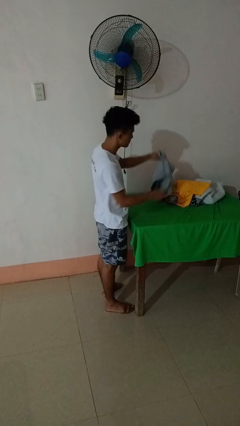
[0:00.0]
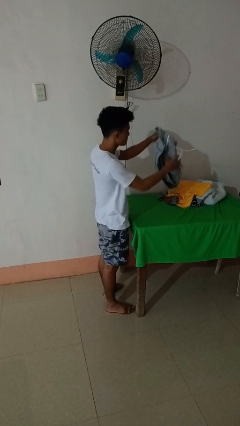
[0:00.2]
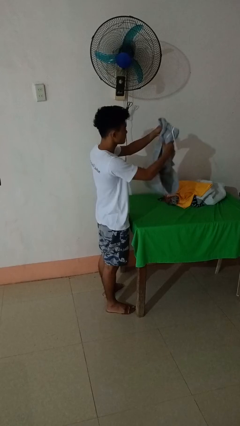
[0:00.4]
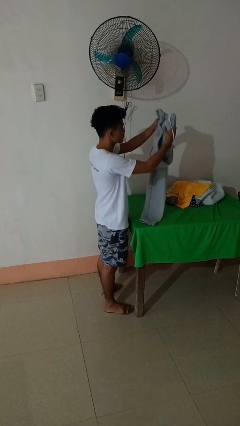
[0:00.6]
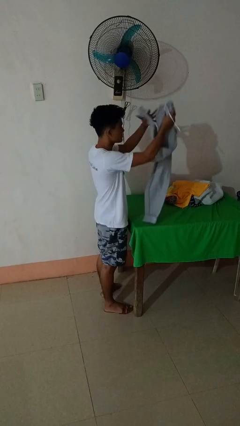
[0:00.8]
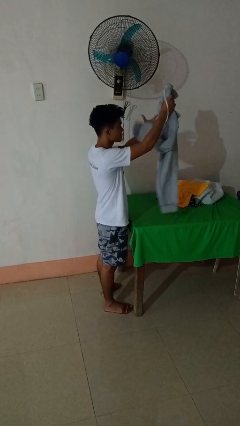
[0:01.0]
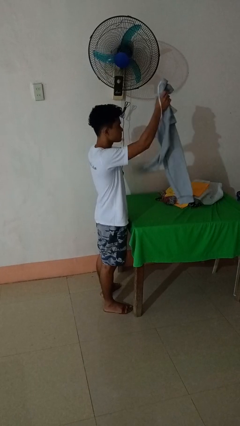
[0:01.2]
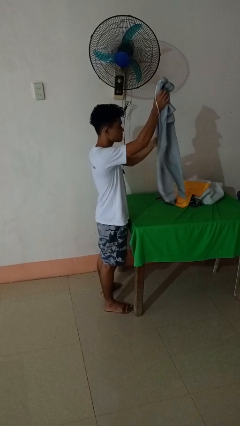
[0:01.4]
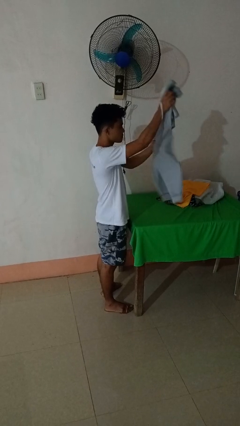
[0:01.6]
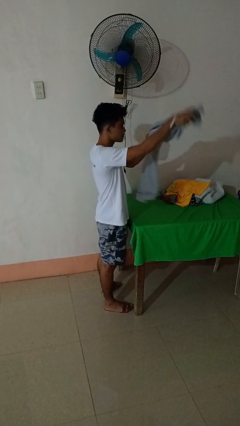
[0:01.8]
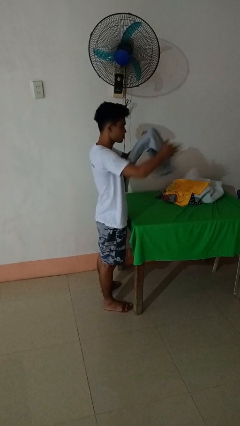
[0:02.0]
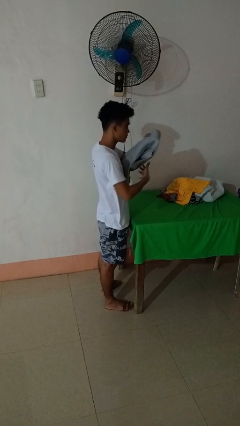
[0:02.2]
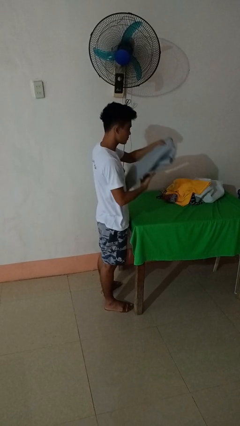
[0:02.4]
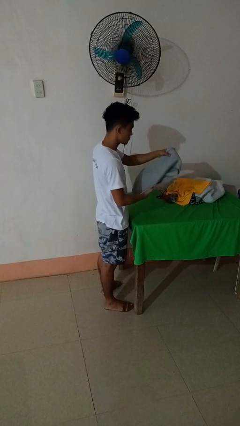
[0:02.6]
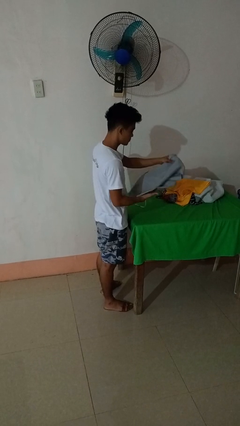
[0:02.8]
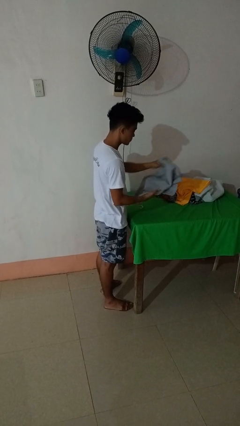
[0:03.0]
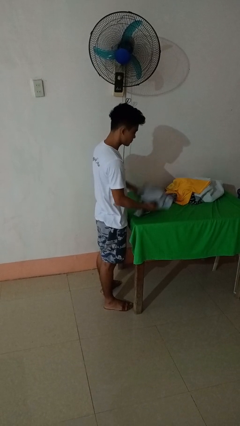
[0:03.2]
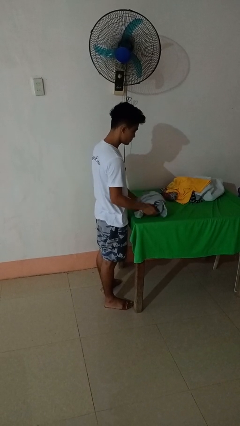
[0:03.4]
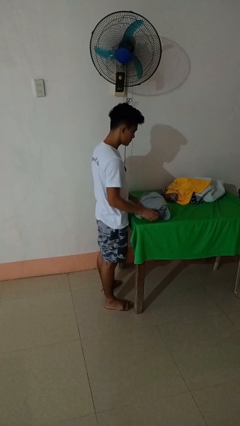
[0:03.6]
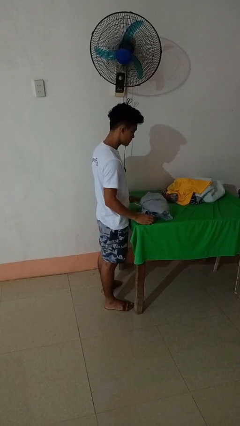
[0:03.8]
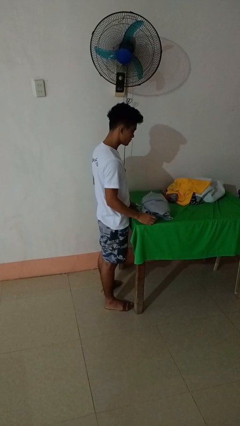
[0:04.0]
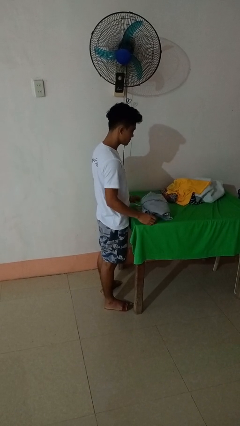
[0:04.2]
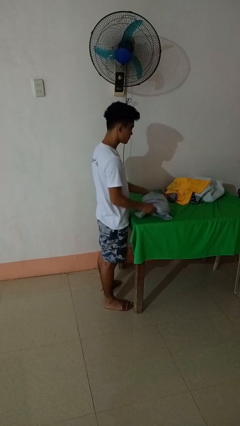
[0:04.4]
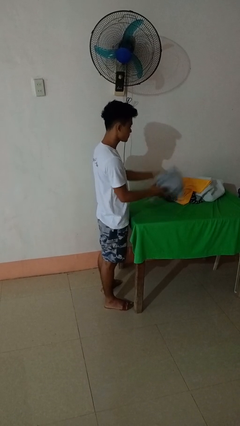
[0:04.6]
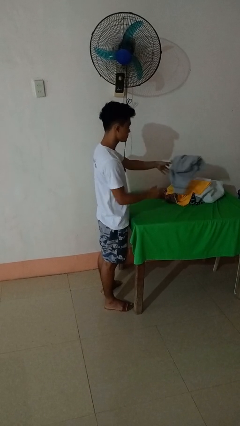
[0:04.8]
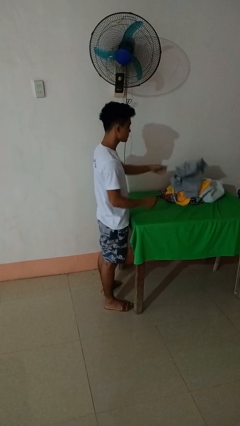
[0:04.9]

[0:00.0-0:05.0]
person folds pants

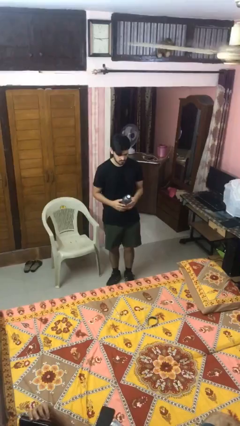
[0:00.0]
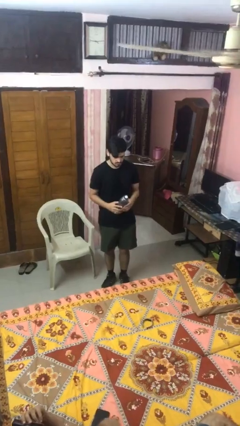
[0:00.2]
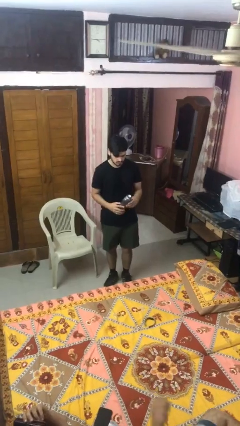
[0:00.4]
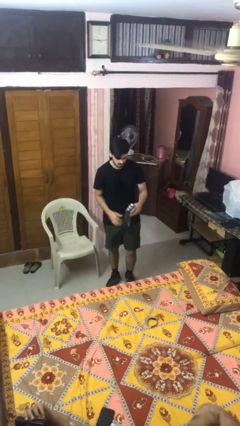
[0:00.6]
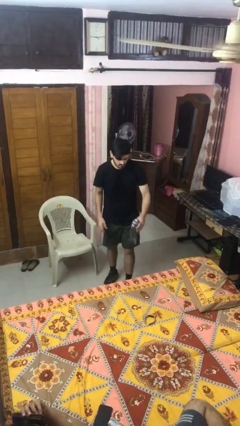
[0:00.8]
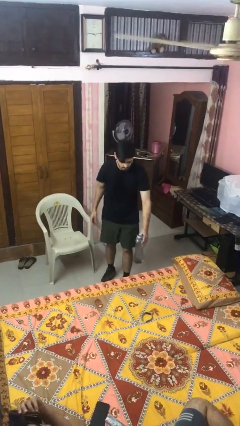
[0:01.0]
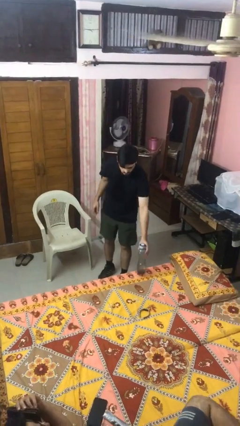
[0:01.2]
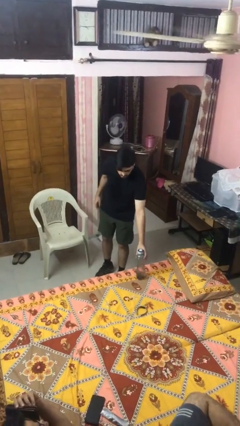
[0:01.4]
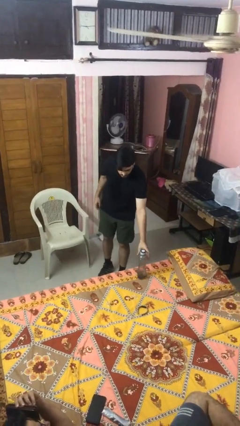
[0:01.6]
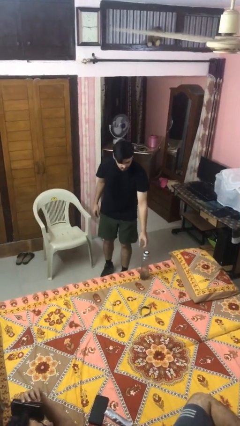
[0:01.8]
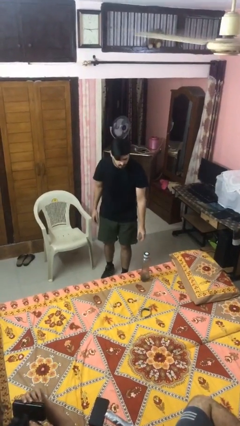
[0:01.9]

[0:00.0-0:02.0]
person puts down object on bed

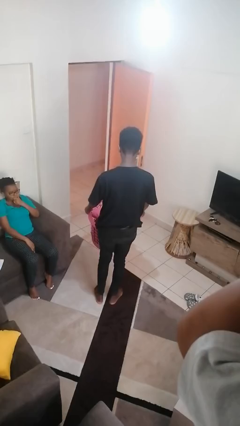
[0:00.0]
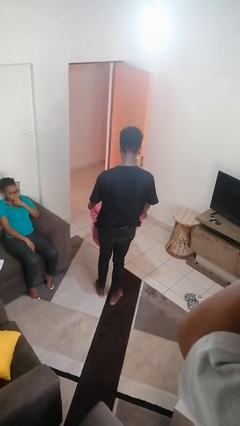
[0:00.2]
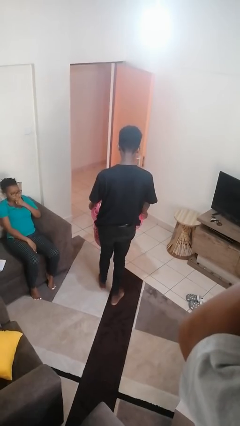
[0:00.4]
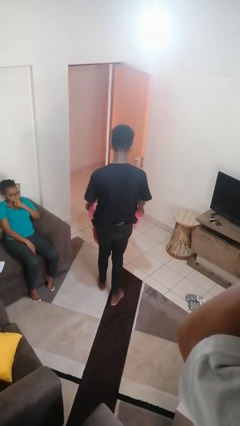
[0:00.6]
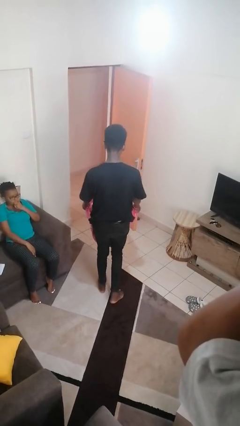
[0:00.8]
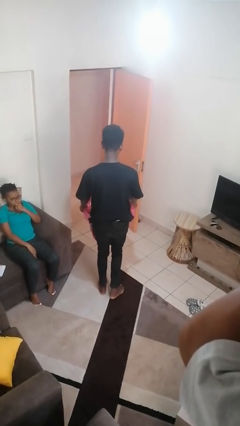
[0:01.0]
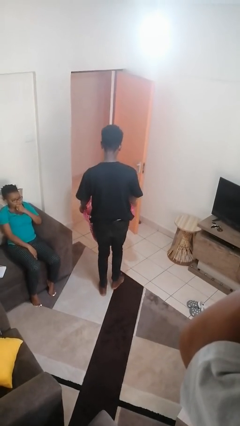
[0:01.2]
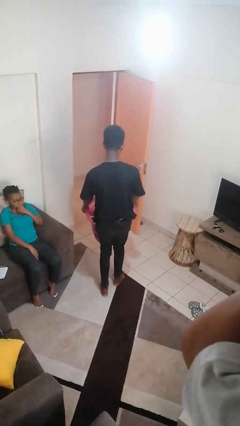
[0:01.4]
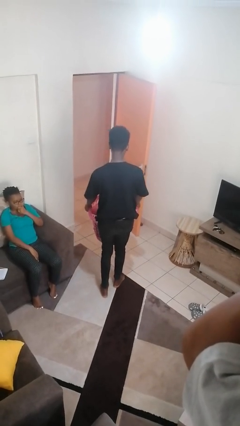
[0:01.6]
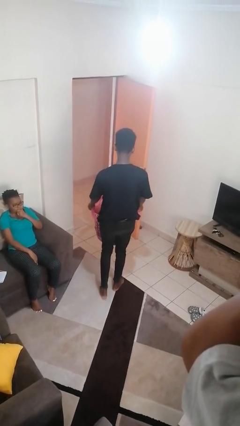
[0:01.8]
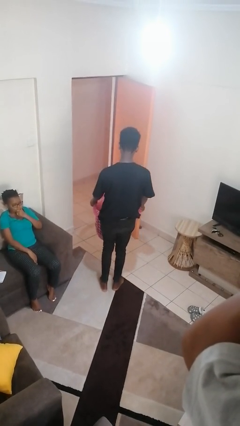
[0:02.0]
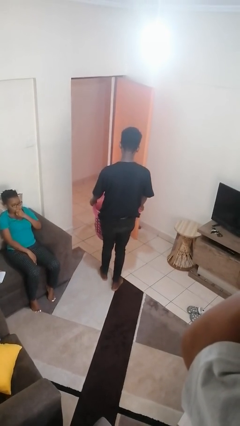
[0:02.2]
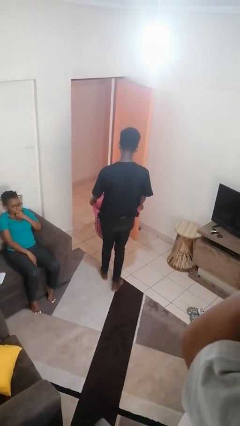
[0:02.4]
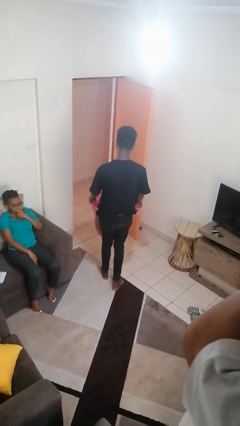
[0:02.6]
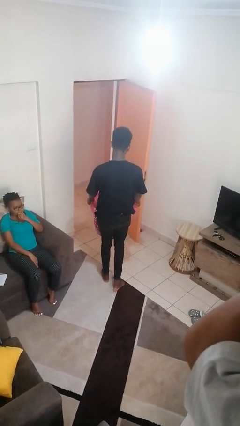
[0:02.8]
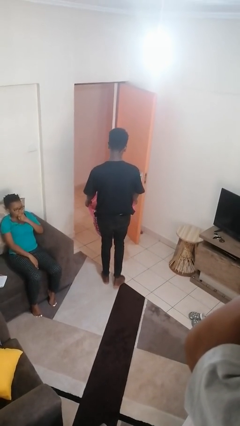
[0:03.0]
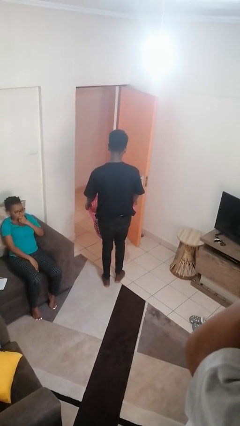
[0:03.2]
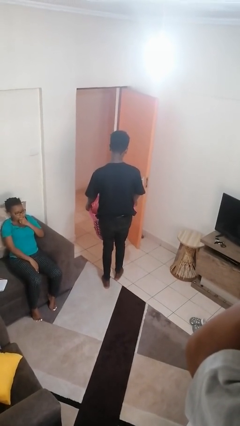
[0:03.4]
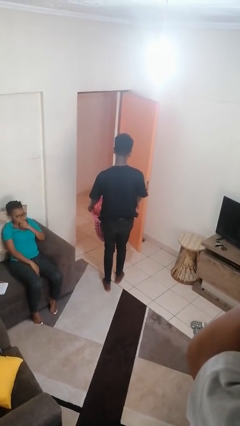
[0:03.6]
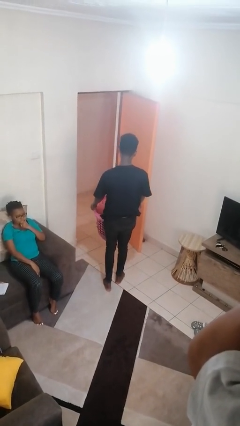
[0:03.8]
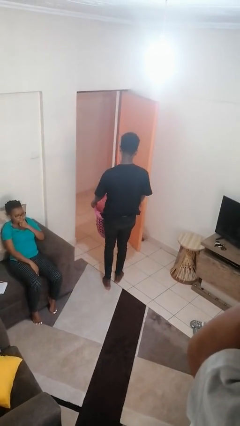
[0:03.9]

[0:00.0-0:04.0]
person carries laundry basket

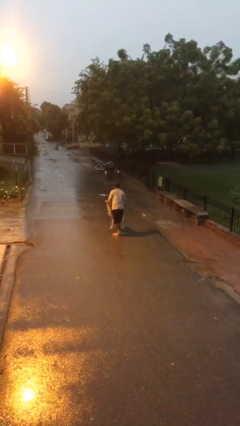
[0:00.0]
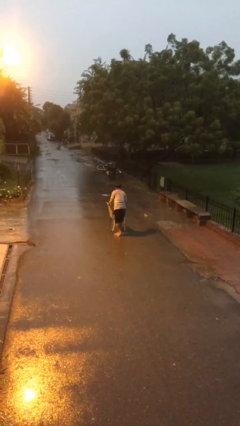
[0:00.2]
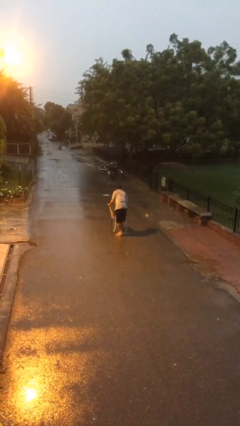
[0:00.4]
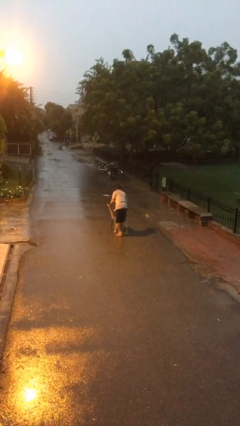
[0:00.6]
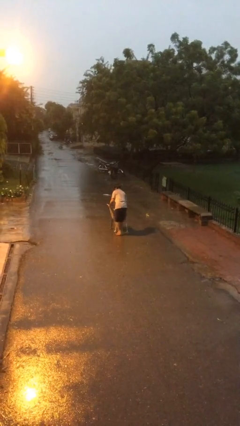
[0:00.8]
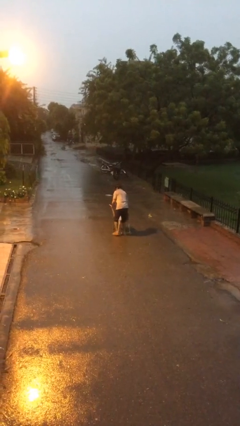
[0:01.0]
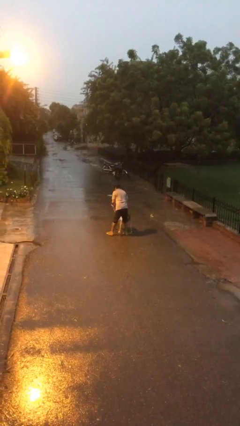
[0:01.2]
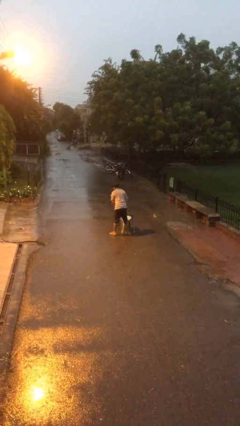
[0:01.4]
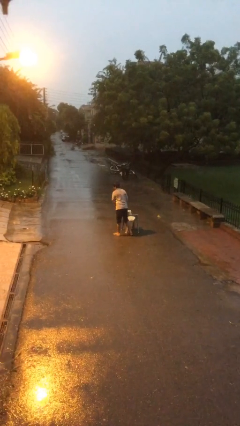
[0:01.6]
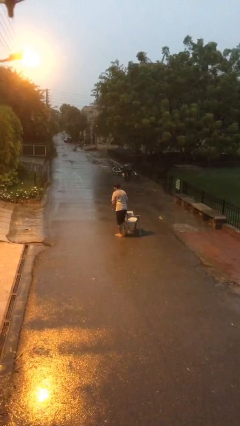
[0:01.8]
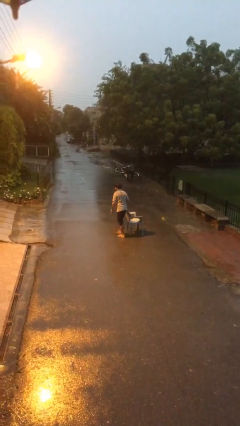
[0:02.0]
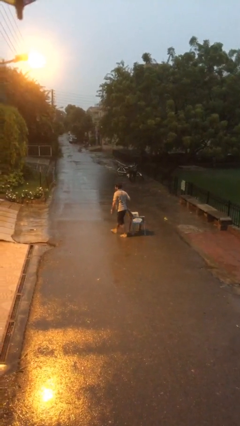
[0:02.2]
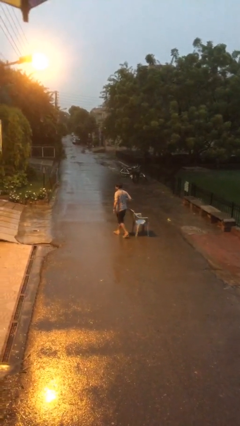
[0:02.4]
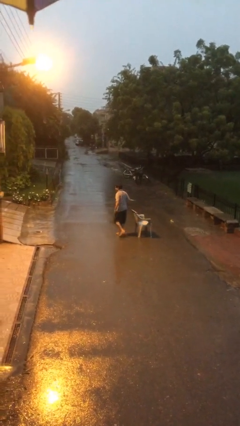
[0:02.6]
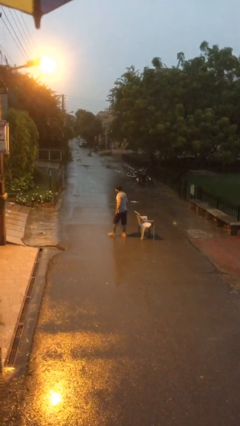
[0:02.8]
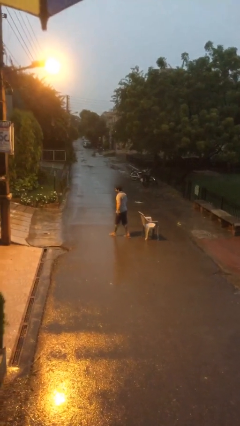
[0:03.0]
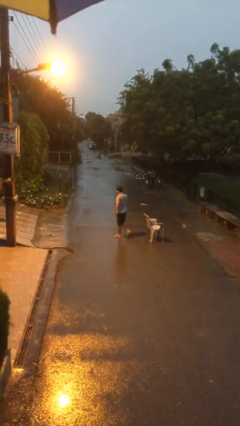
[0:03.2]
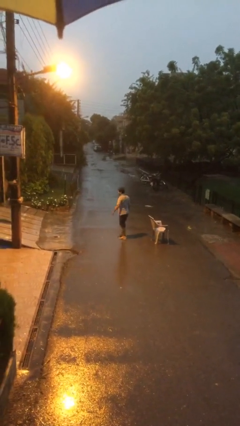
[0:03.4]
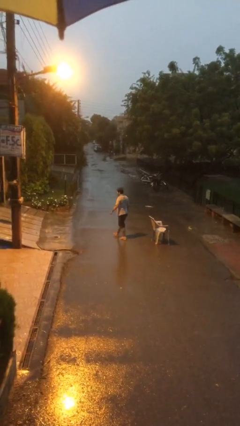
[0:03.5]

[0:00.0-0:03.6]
person puts down object on floor

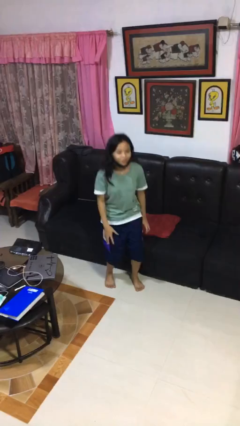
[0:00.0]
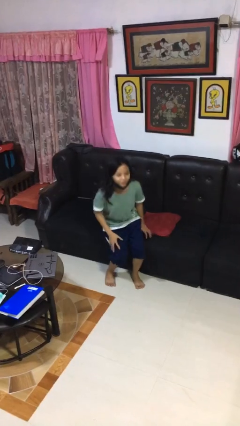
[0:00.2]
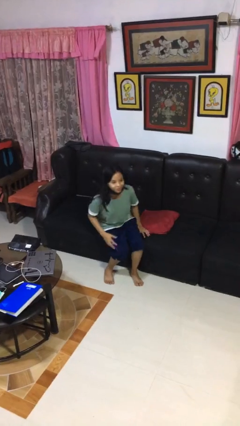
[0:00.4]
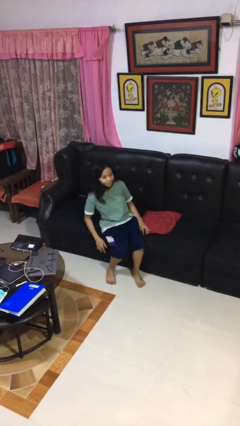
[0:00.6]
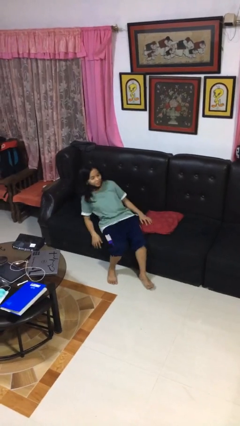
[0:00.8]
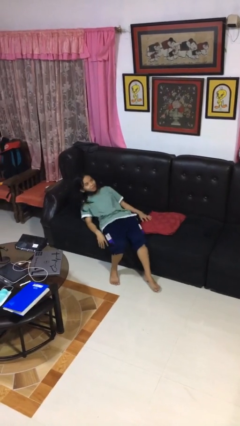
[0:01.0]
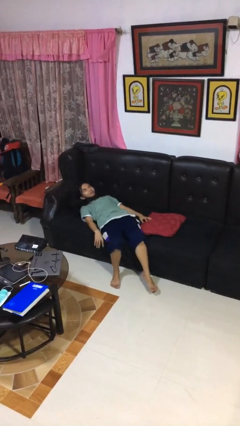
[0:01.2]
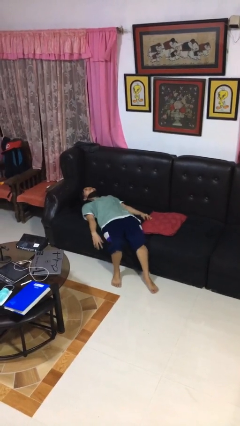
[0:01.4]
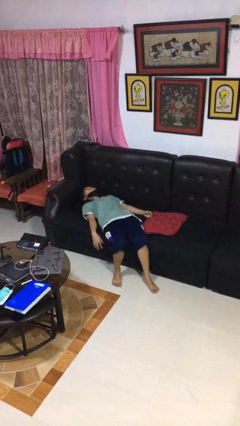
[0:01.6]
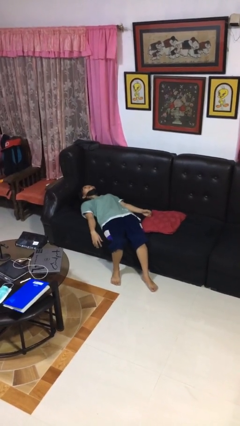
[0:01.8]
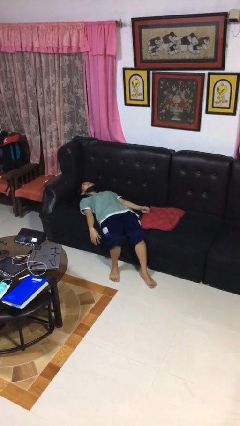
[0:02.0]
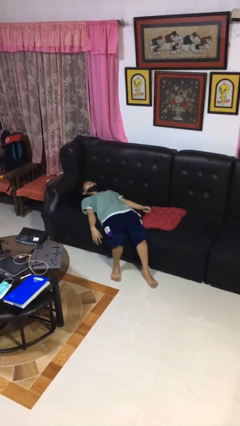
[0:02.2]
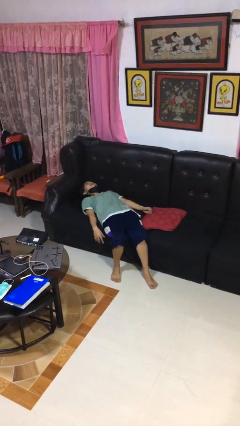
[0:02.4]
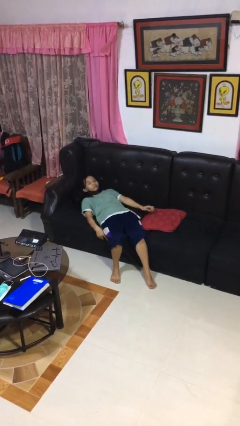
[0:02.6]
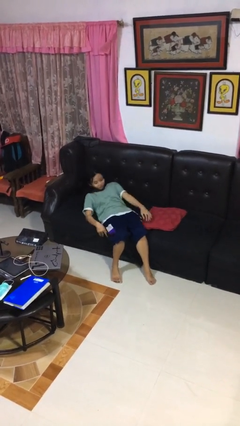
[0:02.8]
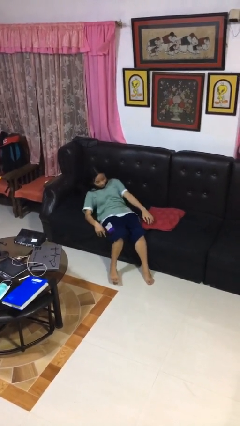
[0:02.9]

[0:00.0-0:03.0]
person lies down on couch

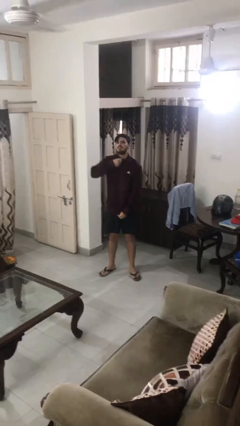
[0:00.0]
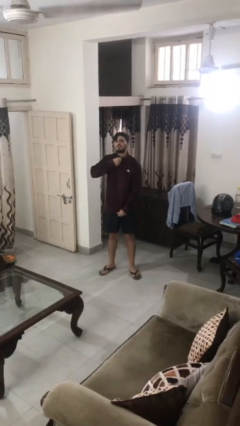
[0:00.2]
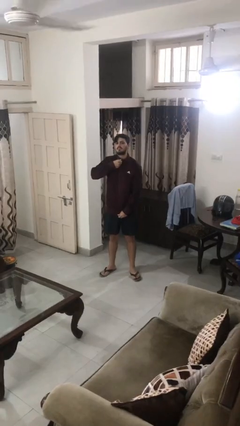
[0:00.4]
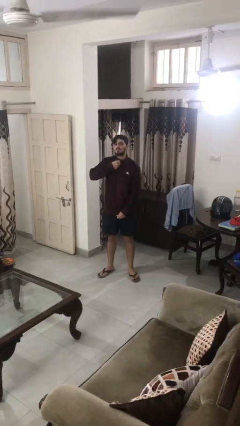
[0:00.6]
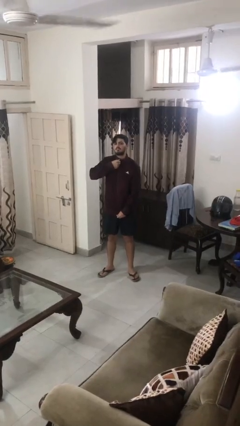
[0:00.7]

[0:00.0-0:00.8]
person zips up jacket
